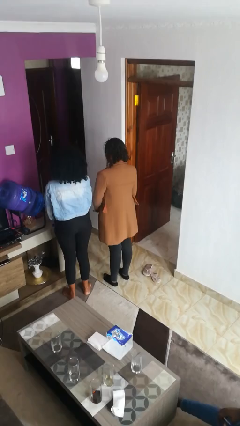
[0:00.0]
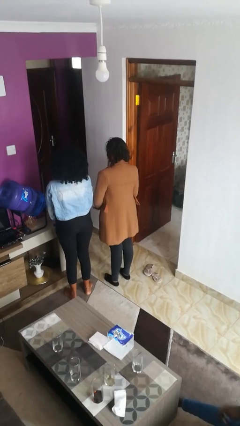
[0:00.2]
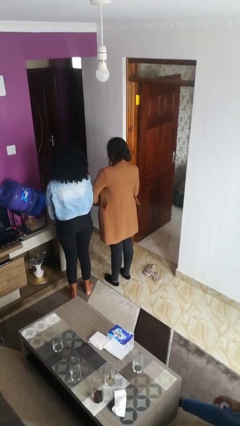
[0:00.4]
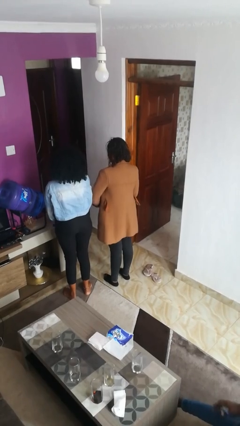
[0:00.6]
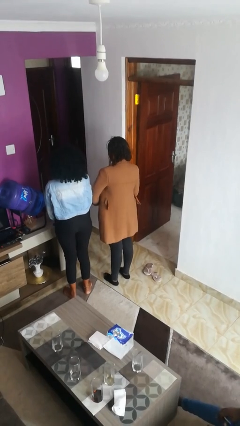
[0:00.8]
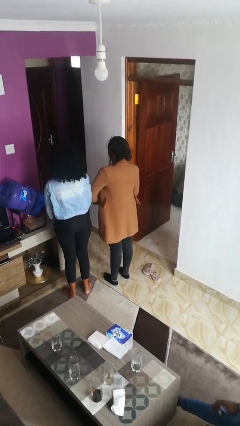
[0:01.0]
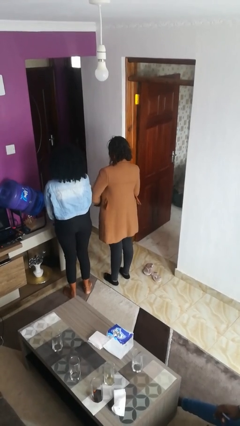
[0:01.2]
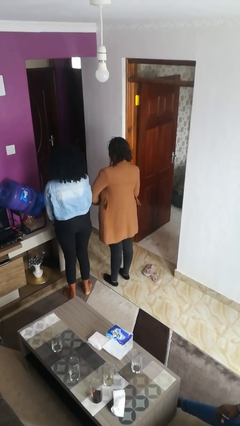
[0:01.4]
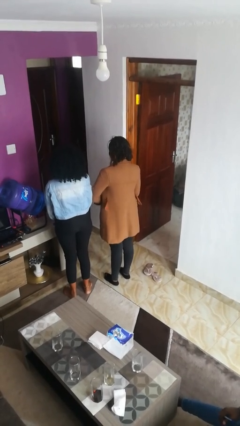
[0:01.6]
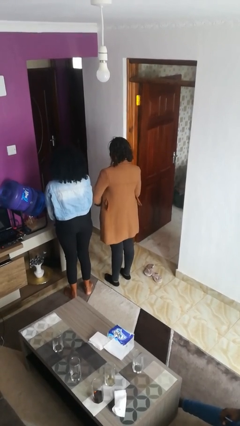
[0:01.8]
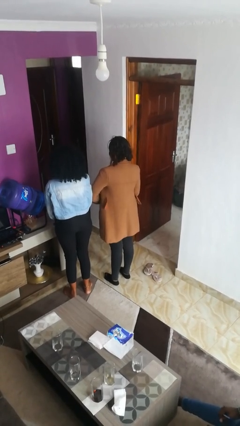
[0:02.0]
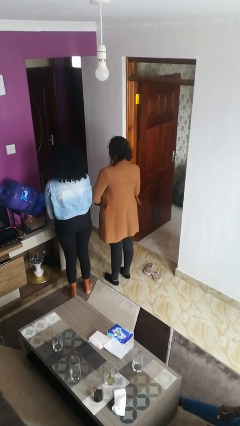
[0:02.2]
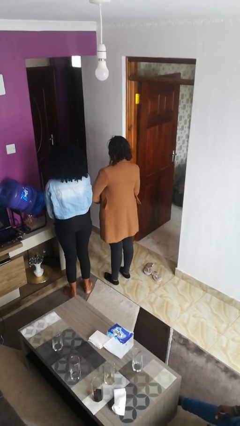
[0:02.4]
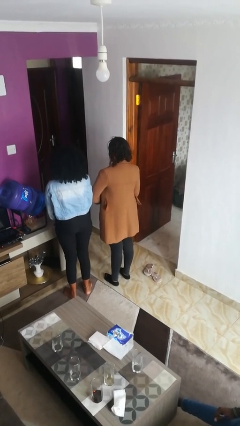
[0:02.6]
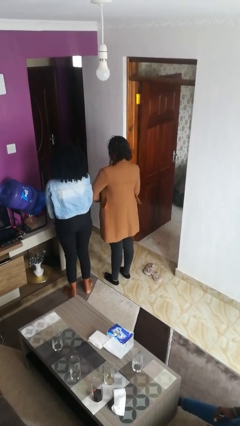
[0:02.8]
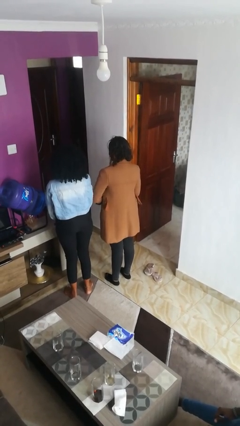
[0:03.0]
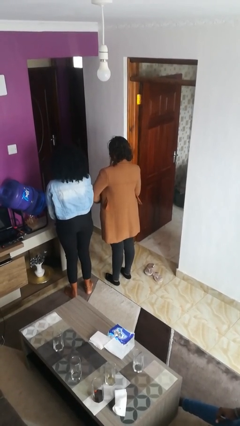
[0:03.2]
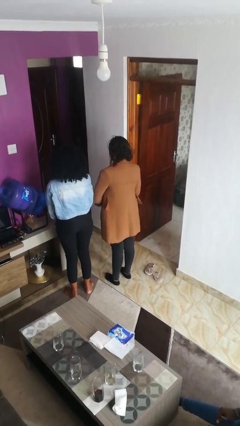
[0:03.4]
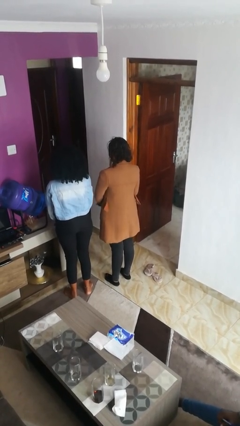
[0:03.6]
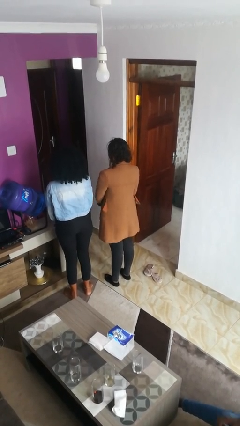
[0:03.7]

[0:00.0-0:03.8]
person nudges person with elbow

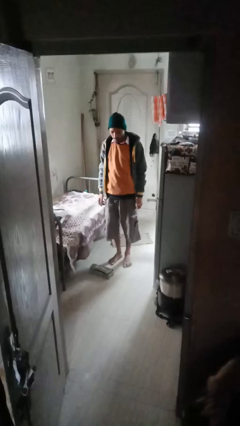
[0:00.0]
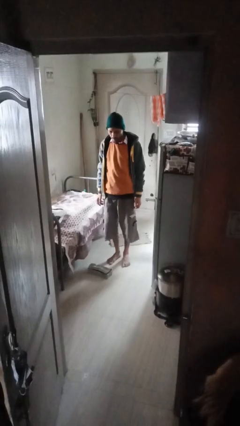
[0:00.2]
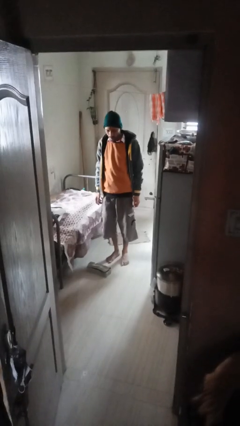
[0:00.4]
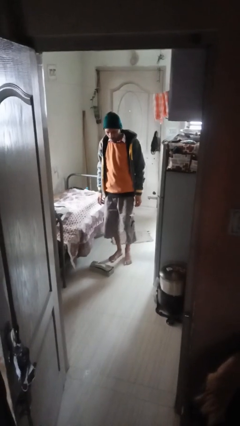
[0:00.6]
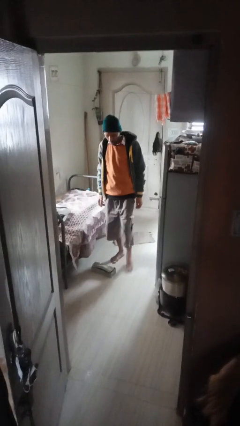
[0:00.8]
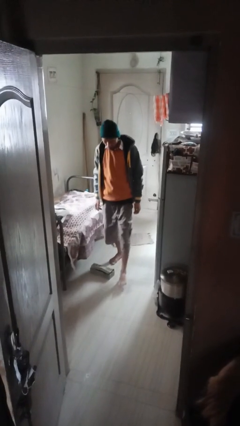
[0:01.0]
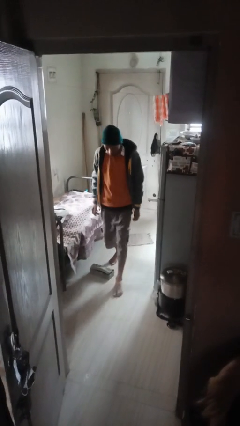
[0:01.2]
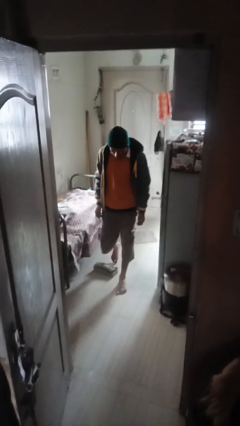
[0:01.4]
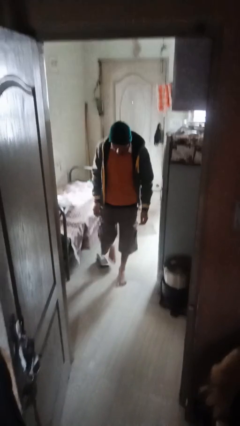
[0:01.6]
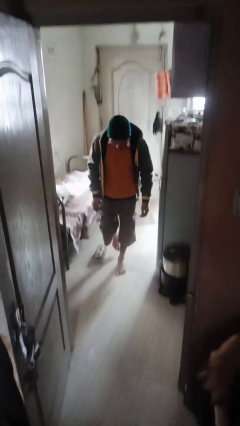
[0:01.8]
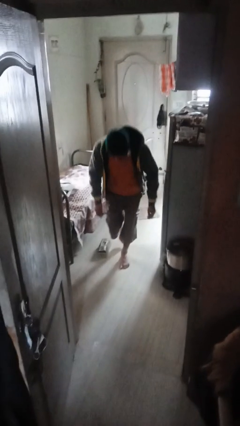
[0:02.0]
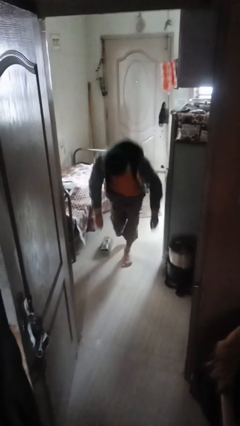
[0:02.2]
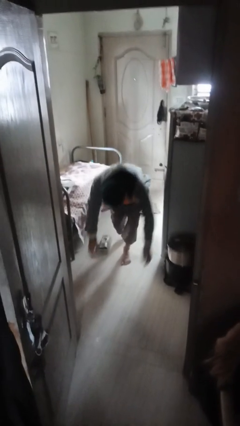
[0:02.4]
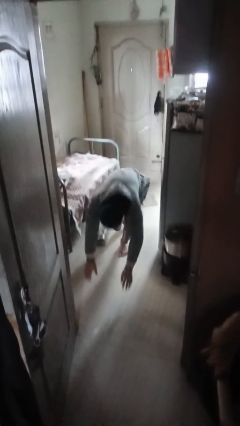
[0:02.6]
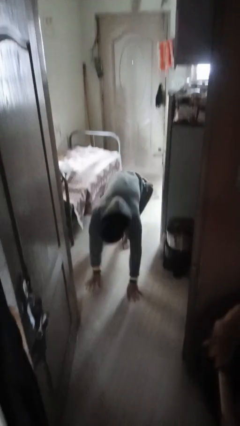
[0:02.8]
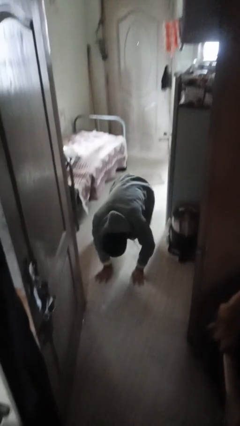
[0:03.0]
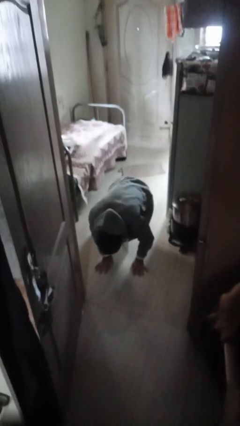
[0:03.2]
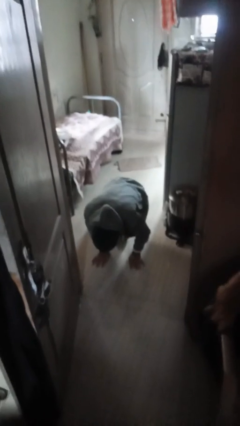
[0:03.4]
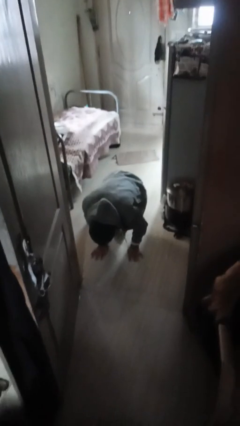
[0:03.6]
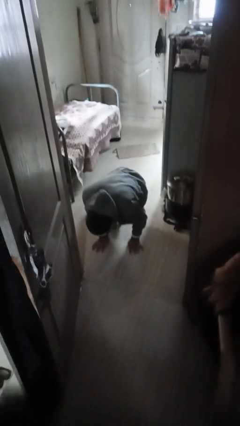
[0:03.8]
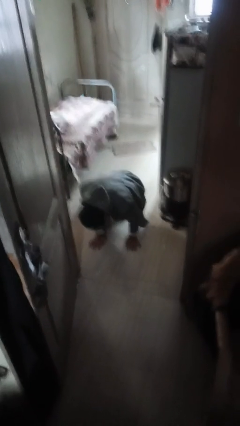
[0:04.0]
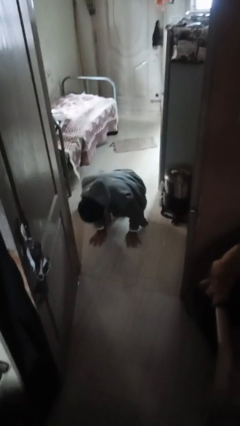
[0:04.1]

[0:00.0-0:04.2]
person trips on object on floor

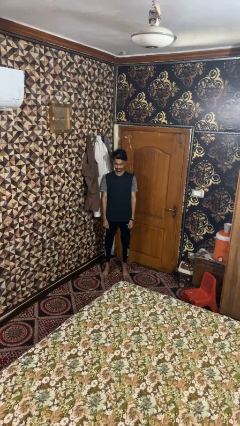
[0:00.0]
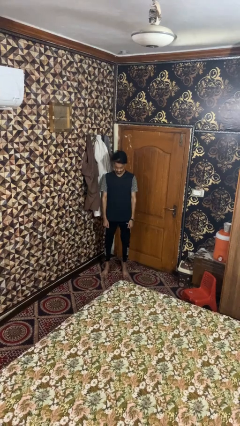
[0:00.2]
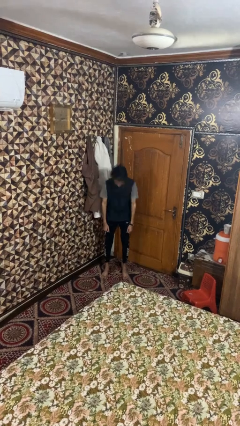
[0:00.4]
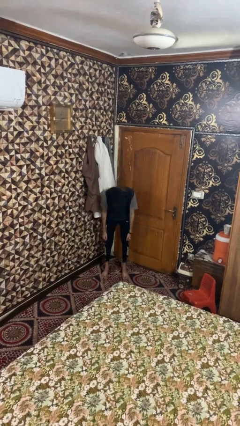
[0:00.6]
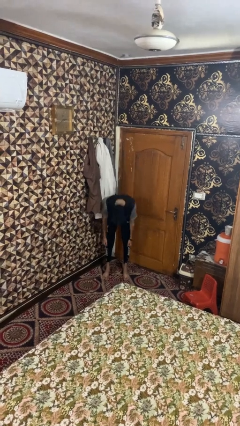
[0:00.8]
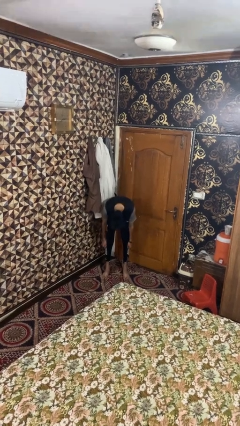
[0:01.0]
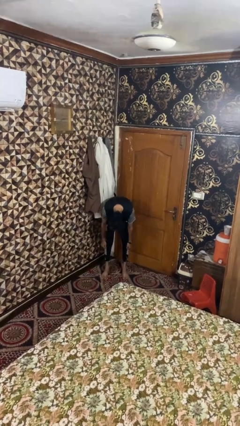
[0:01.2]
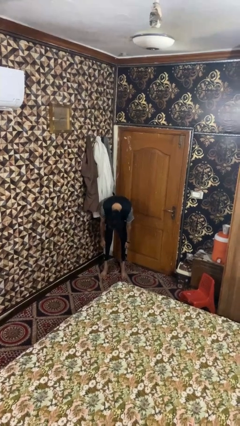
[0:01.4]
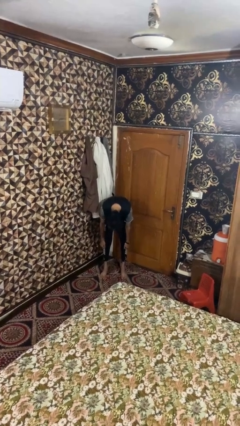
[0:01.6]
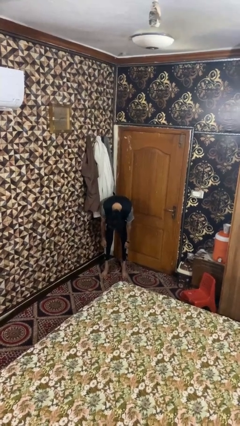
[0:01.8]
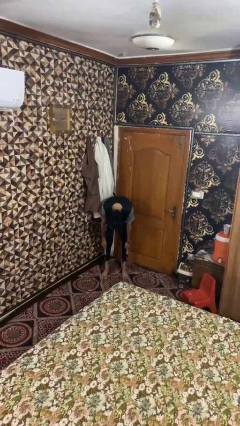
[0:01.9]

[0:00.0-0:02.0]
person bows

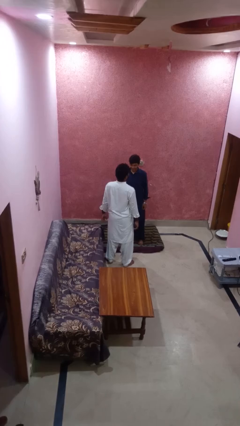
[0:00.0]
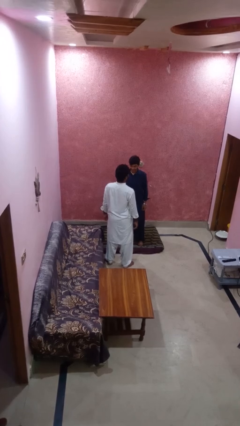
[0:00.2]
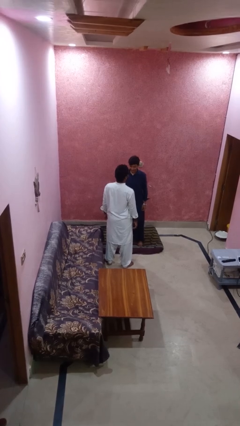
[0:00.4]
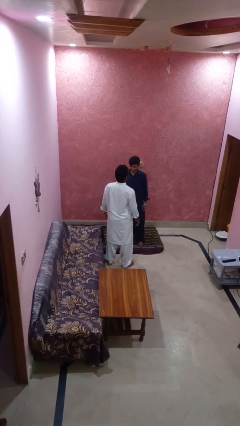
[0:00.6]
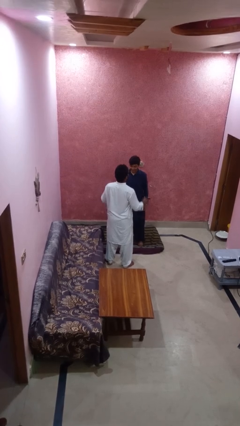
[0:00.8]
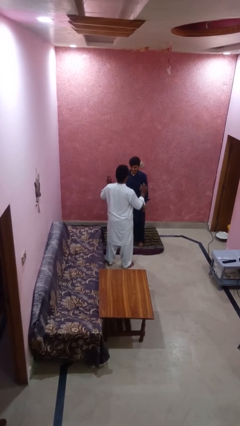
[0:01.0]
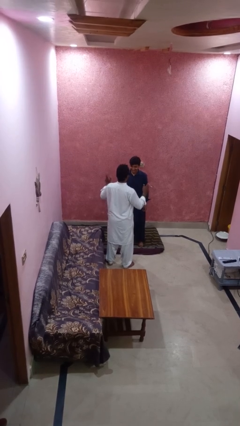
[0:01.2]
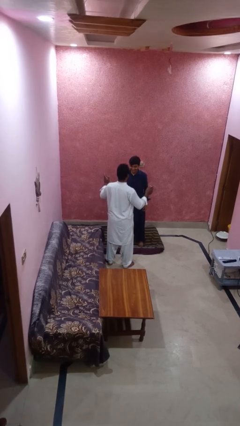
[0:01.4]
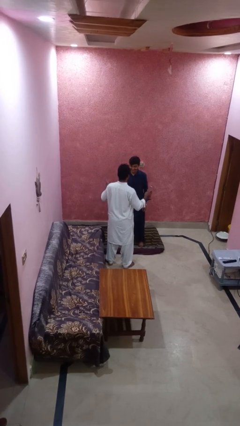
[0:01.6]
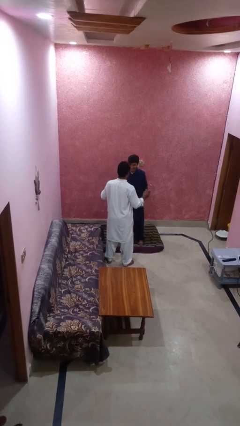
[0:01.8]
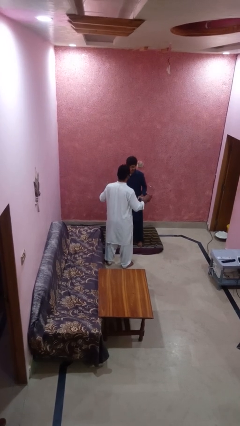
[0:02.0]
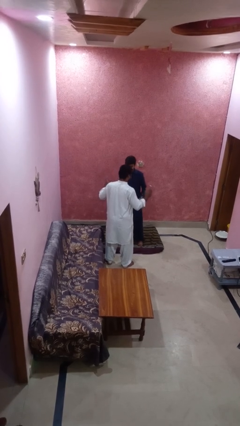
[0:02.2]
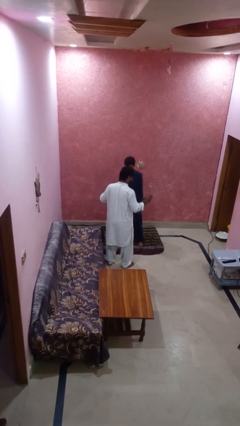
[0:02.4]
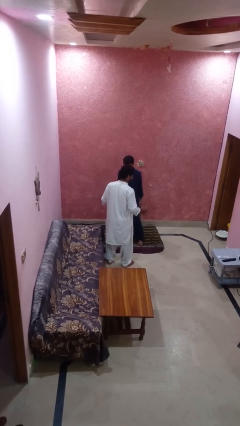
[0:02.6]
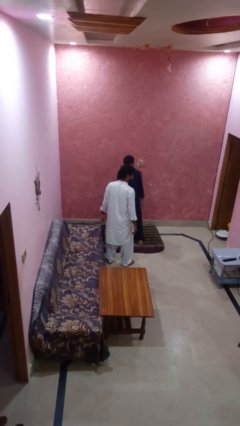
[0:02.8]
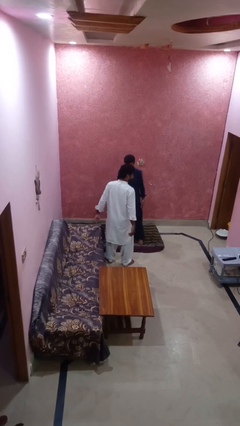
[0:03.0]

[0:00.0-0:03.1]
person laughs with person

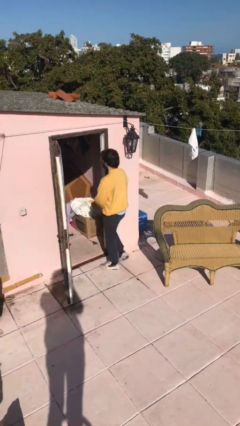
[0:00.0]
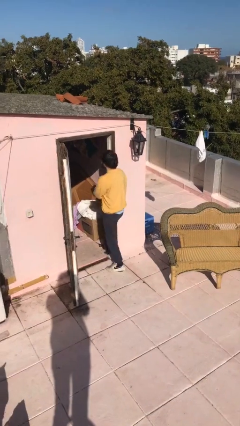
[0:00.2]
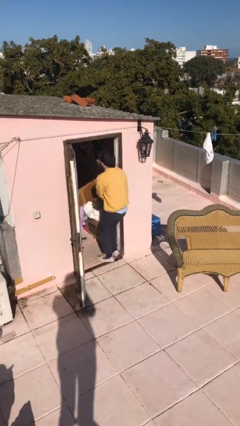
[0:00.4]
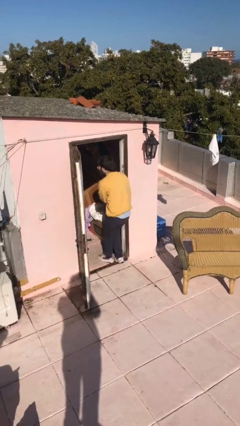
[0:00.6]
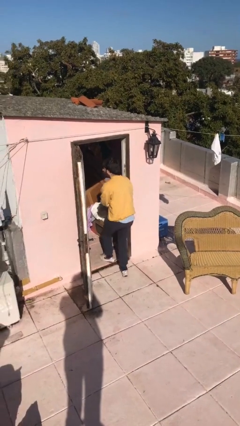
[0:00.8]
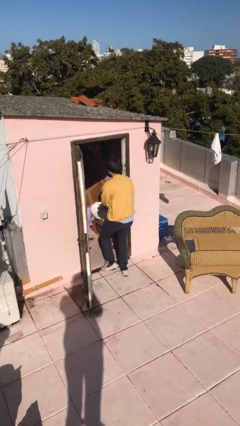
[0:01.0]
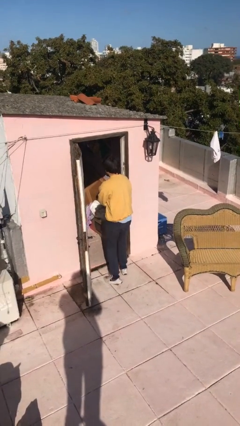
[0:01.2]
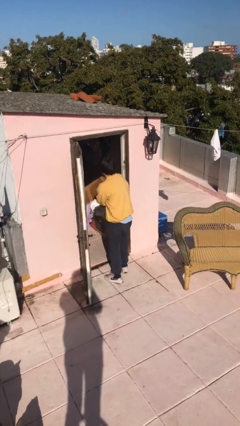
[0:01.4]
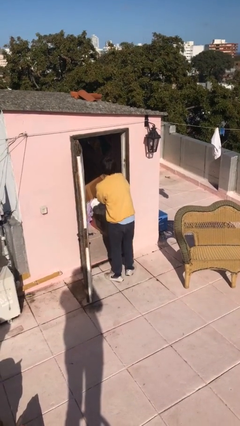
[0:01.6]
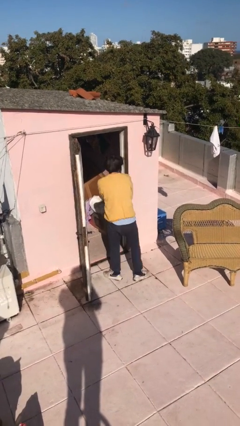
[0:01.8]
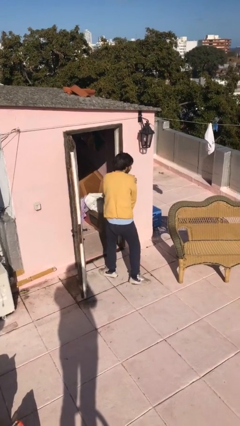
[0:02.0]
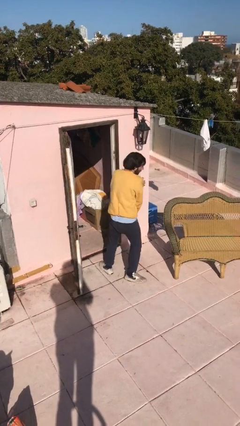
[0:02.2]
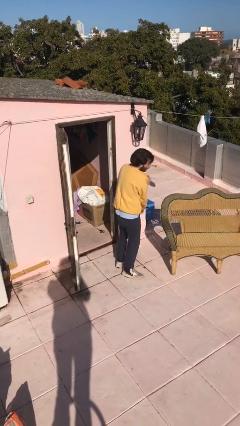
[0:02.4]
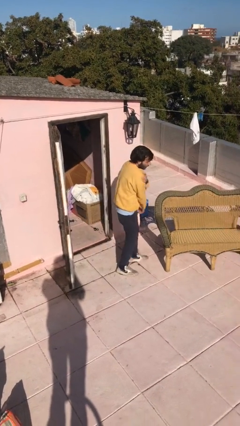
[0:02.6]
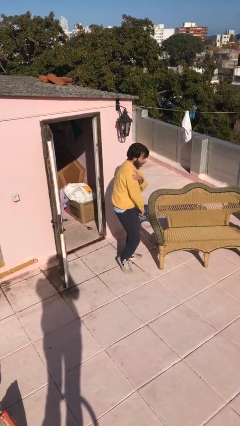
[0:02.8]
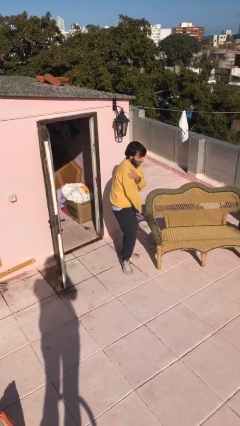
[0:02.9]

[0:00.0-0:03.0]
person bumps into wall

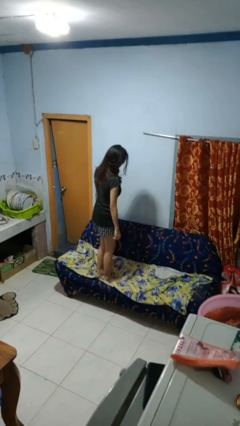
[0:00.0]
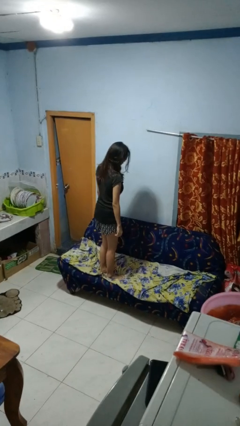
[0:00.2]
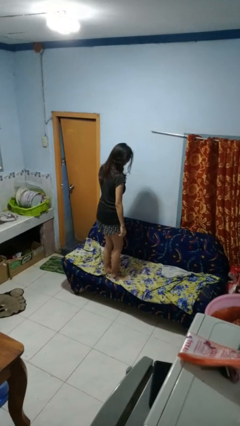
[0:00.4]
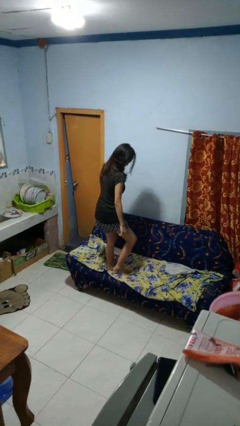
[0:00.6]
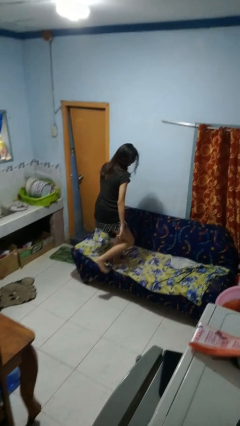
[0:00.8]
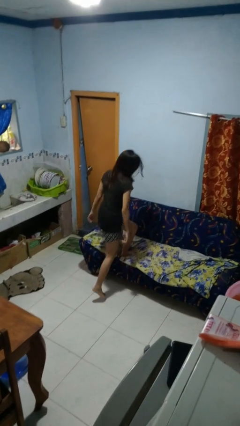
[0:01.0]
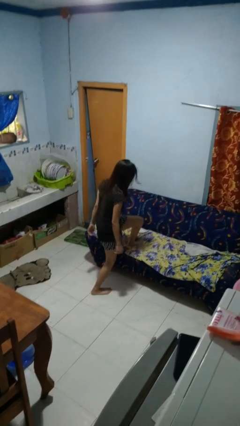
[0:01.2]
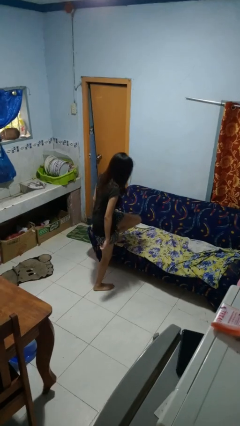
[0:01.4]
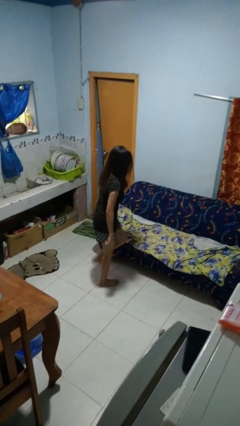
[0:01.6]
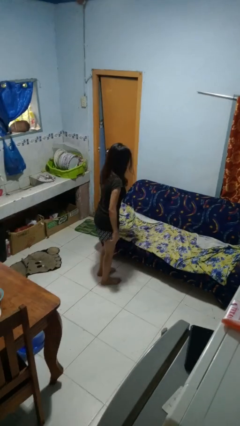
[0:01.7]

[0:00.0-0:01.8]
person climbs off couch
